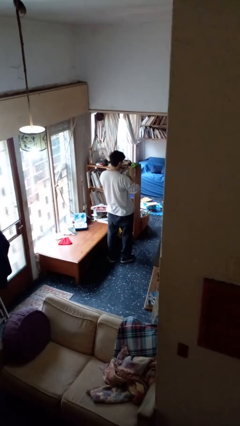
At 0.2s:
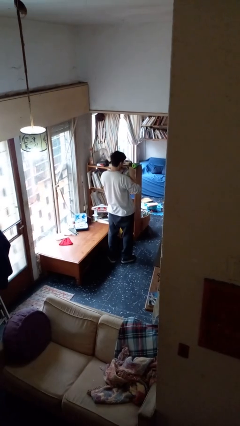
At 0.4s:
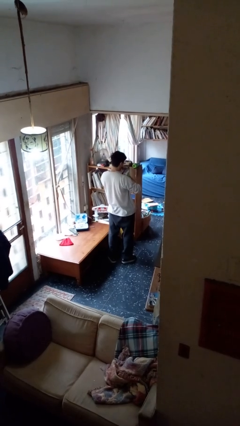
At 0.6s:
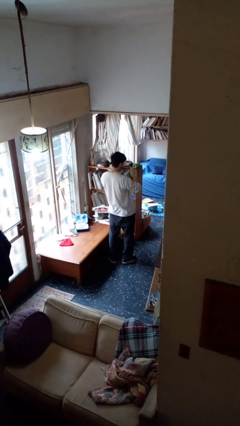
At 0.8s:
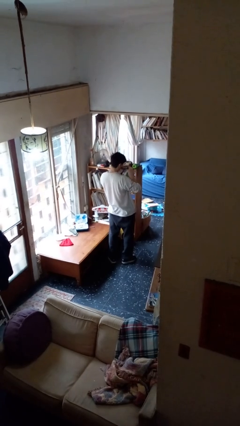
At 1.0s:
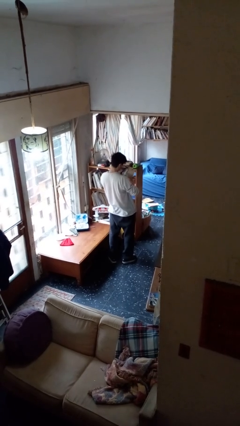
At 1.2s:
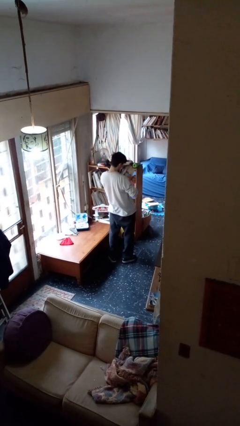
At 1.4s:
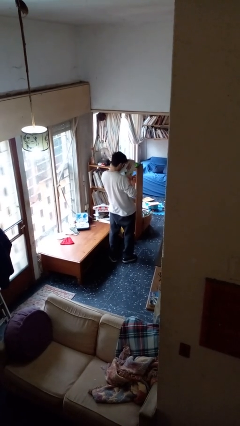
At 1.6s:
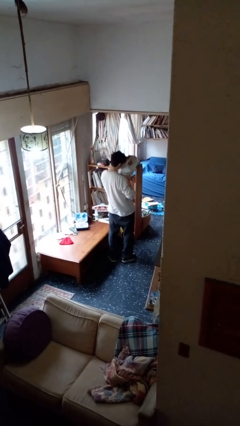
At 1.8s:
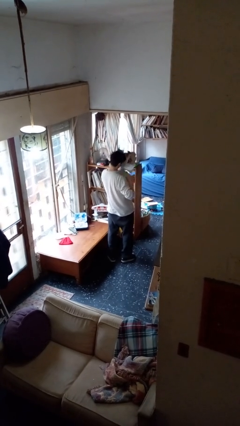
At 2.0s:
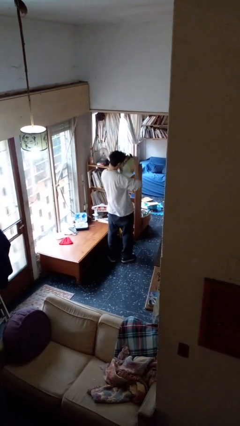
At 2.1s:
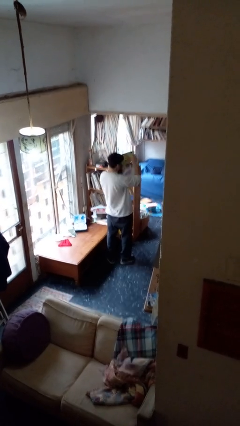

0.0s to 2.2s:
person tears paper

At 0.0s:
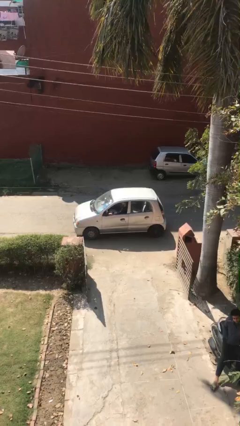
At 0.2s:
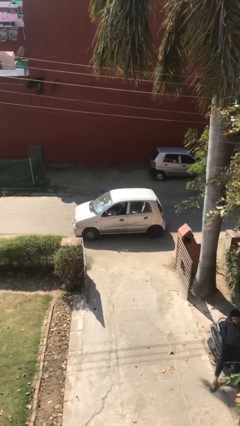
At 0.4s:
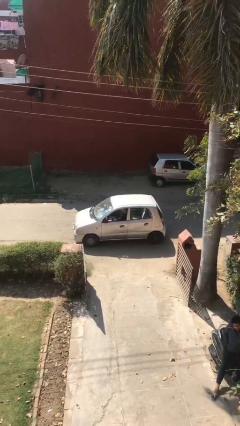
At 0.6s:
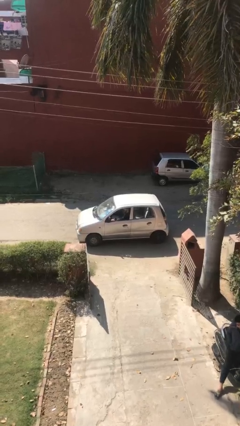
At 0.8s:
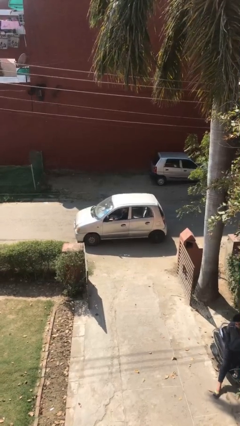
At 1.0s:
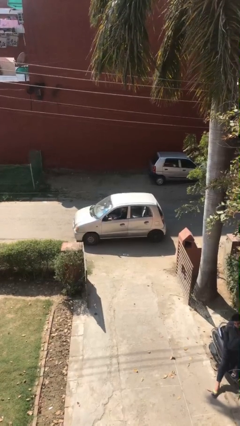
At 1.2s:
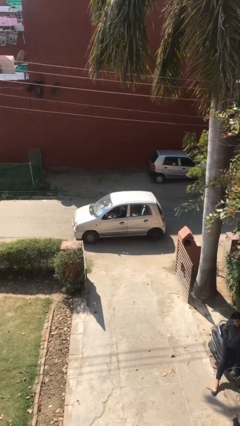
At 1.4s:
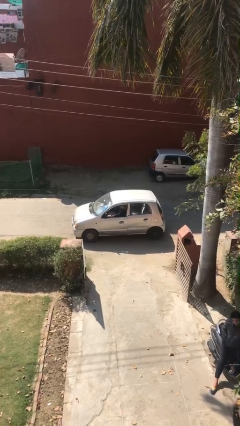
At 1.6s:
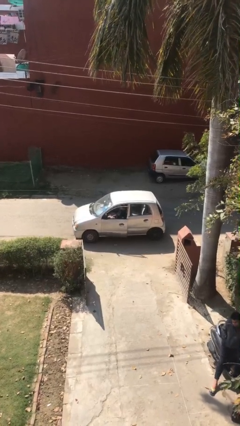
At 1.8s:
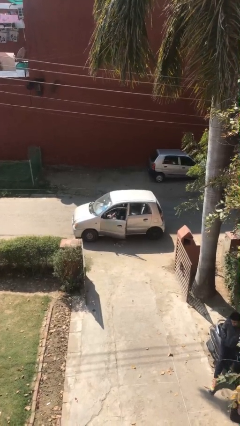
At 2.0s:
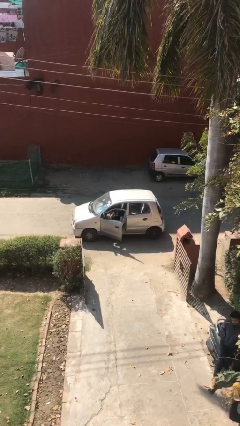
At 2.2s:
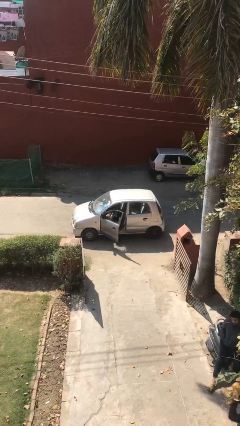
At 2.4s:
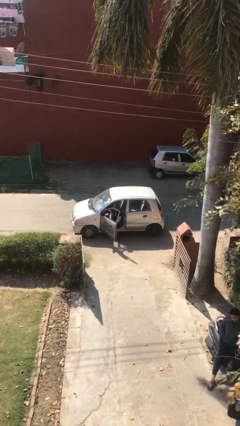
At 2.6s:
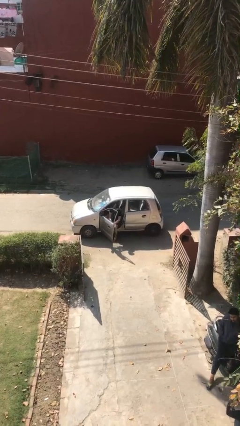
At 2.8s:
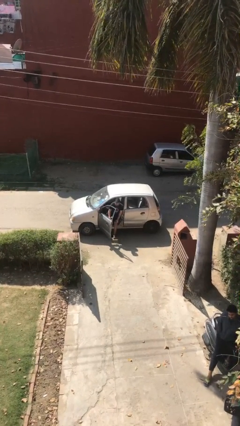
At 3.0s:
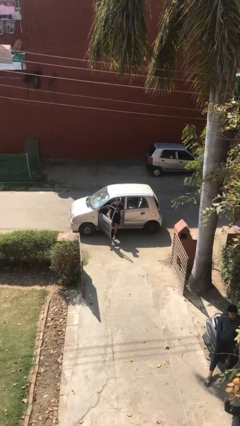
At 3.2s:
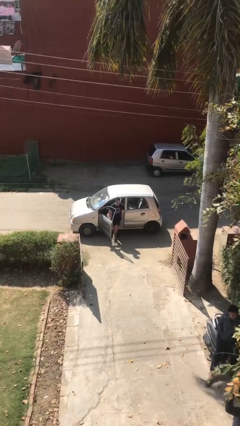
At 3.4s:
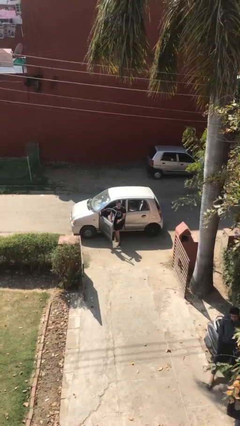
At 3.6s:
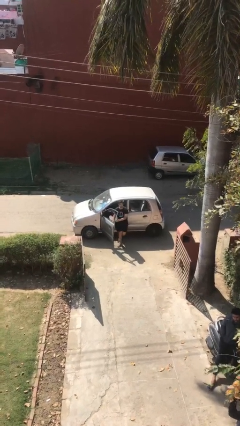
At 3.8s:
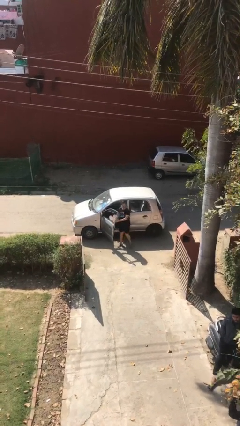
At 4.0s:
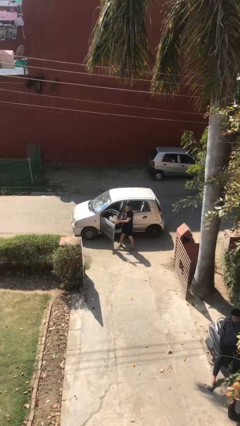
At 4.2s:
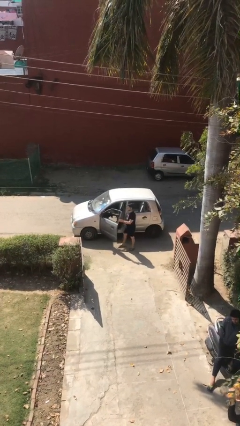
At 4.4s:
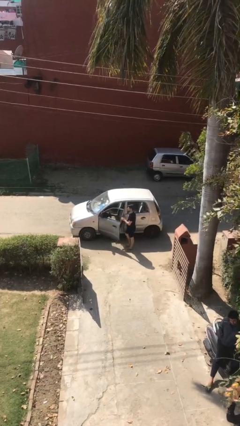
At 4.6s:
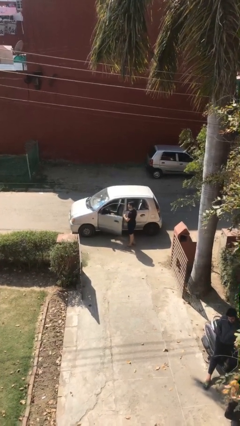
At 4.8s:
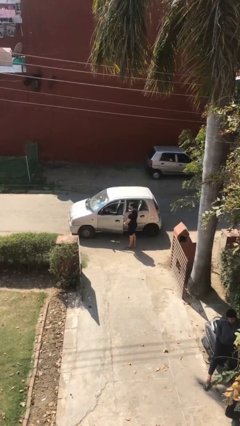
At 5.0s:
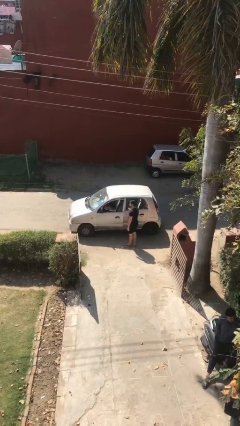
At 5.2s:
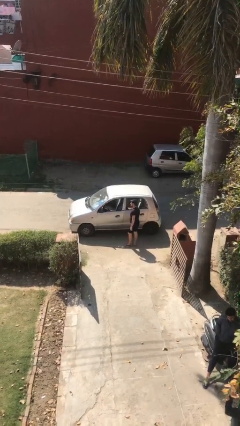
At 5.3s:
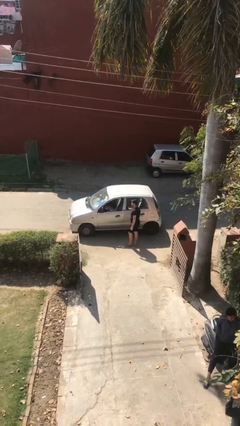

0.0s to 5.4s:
car drops off person

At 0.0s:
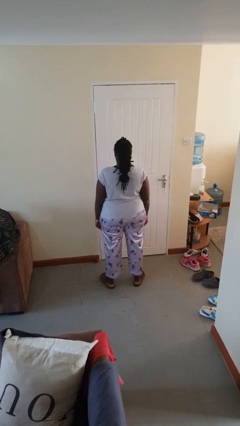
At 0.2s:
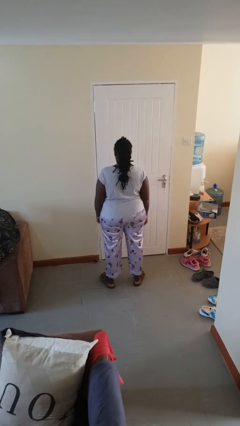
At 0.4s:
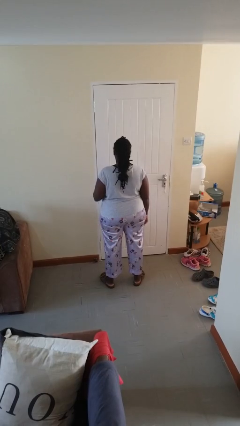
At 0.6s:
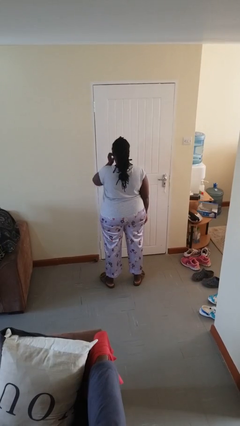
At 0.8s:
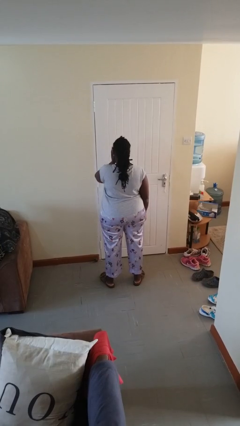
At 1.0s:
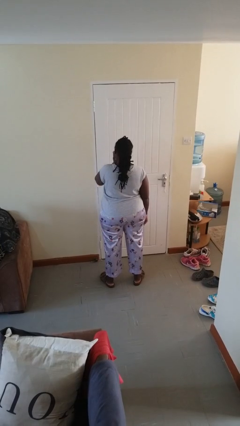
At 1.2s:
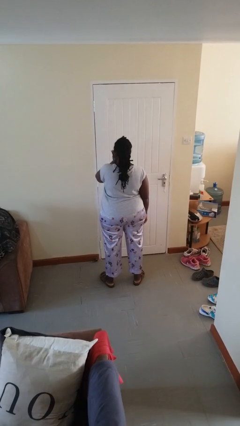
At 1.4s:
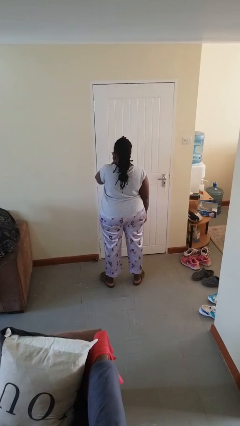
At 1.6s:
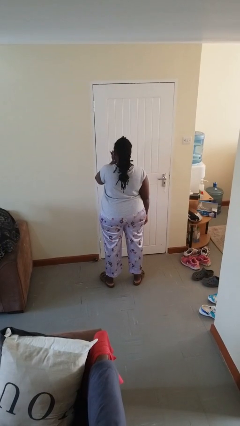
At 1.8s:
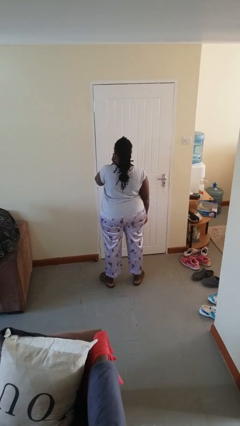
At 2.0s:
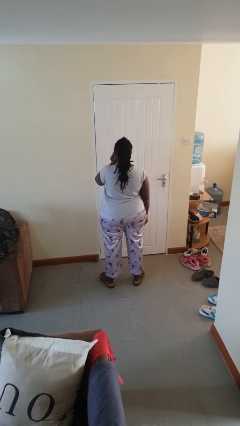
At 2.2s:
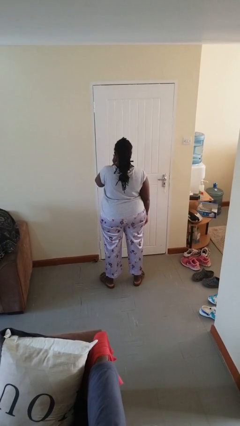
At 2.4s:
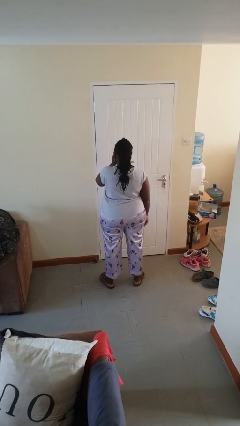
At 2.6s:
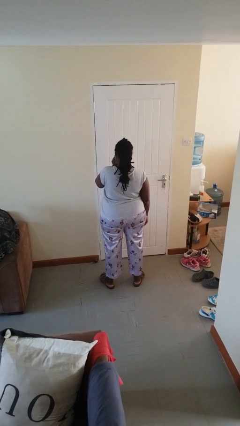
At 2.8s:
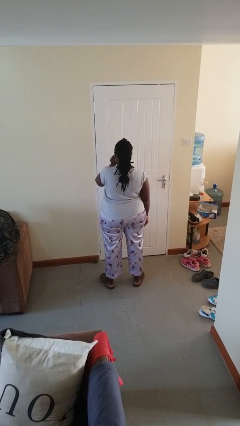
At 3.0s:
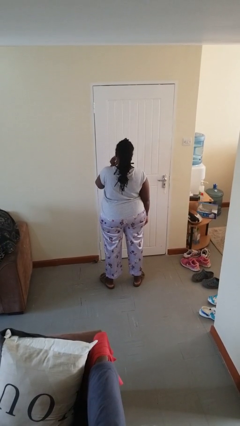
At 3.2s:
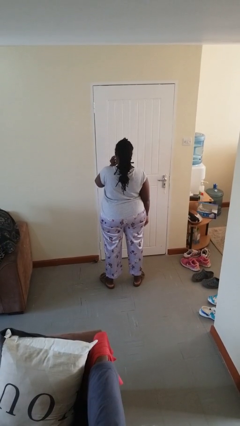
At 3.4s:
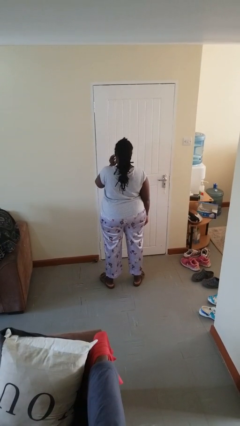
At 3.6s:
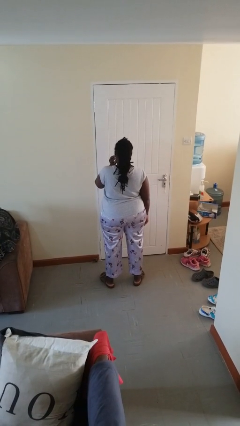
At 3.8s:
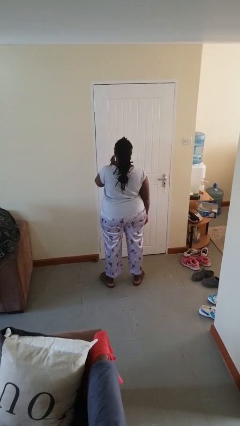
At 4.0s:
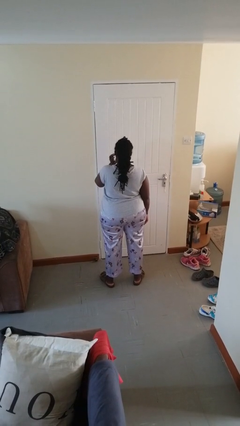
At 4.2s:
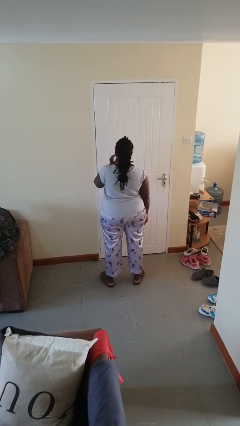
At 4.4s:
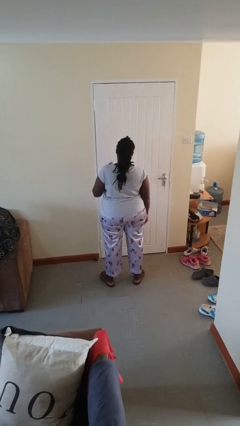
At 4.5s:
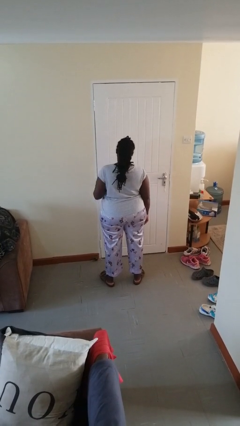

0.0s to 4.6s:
person scratches face

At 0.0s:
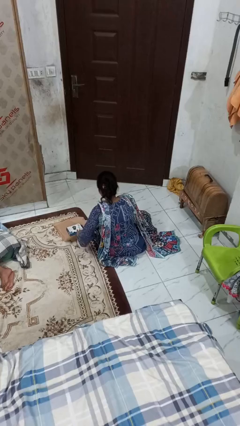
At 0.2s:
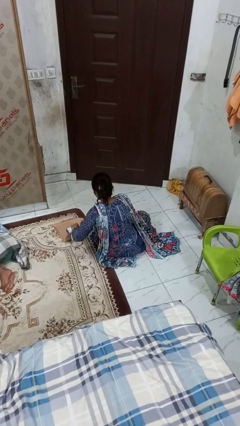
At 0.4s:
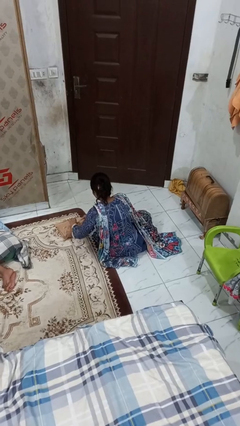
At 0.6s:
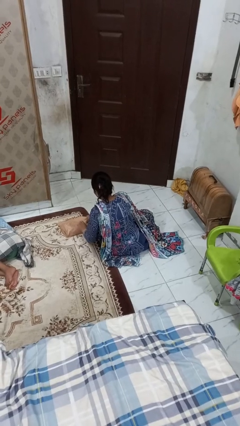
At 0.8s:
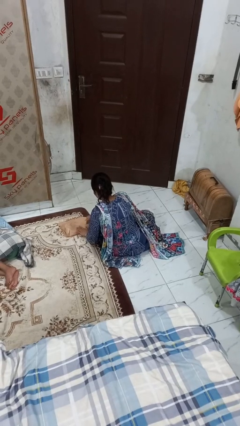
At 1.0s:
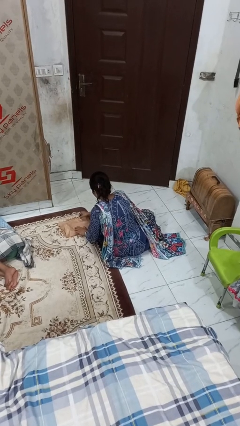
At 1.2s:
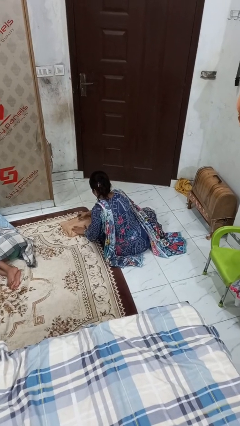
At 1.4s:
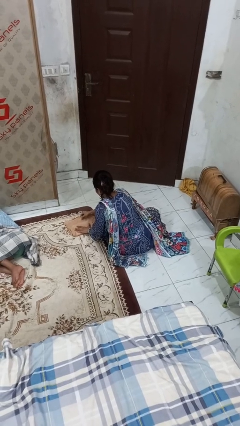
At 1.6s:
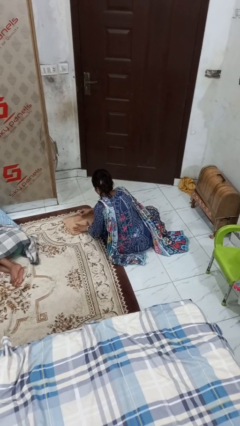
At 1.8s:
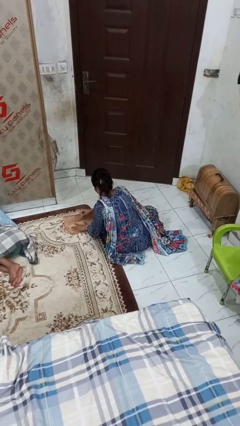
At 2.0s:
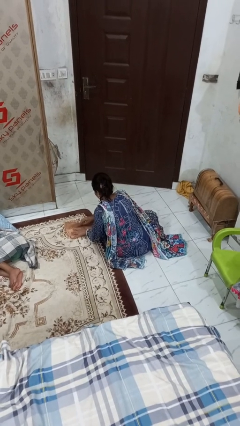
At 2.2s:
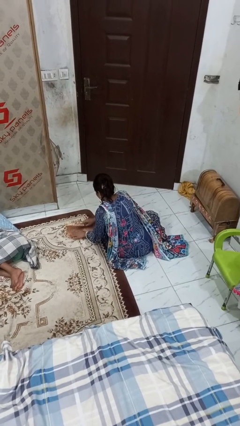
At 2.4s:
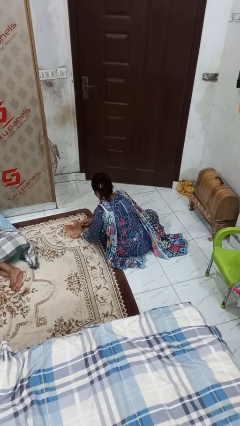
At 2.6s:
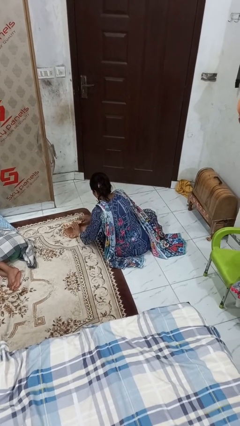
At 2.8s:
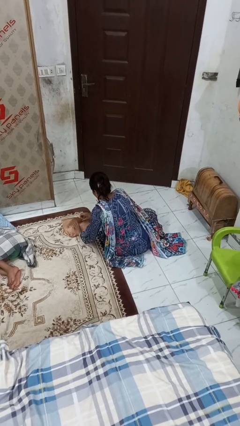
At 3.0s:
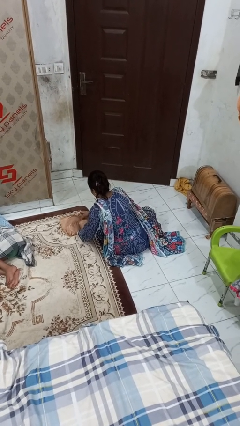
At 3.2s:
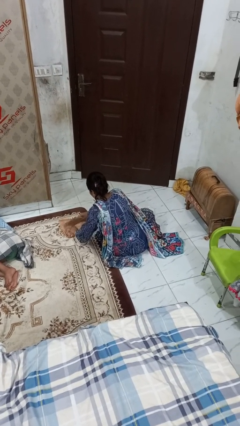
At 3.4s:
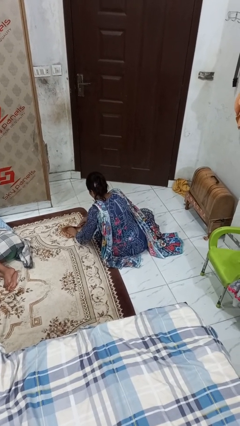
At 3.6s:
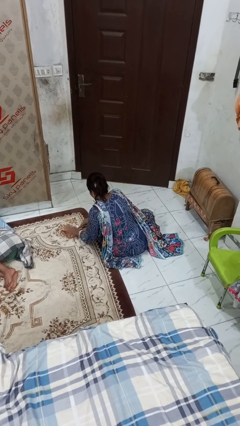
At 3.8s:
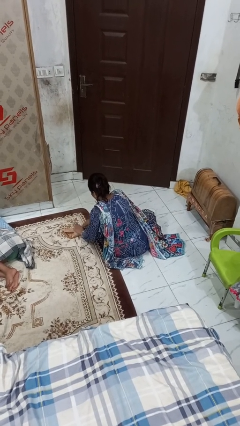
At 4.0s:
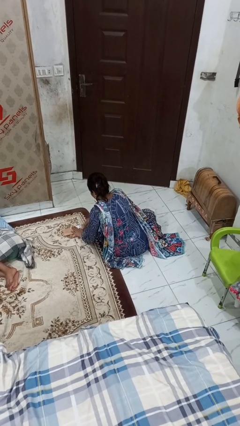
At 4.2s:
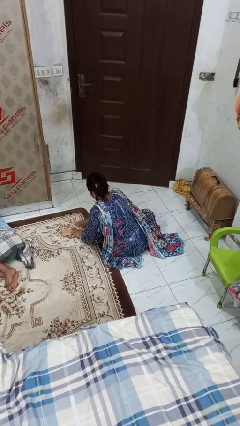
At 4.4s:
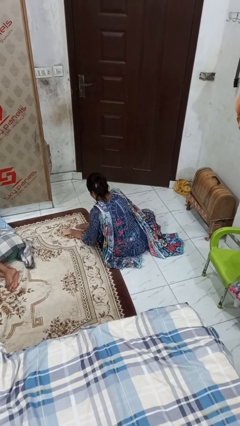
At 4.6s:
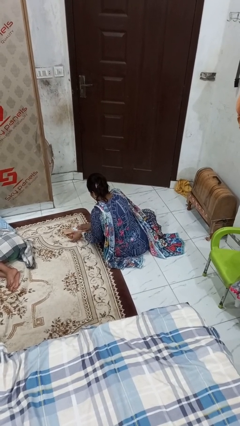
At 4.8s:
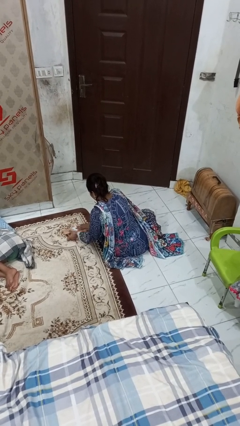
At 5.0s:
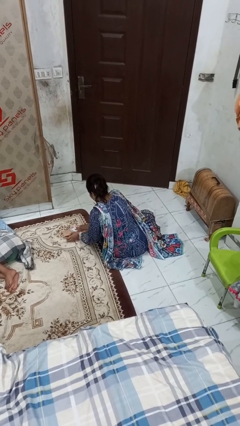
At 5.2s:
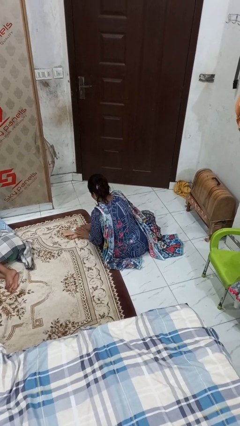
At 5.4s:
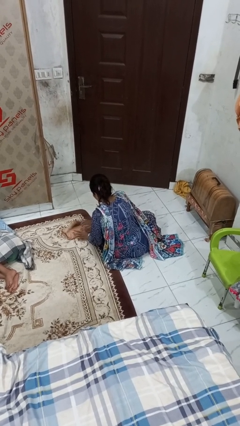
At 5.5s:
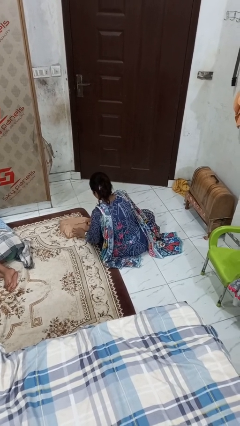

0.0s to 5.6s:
person wraps box
